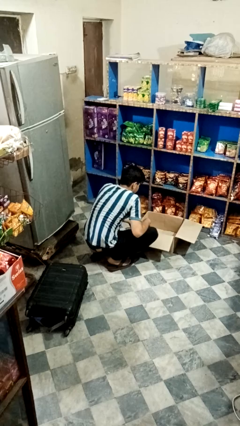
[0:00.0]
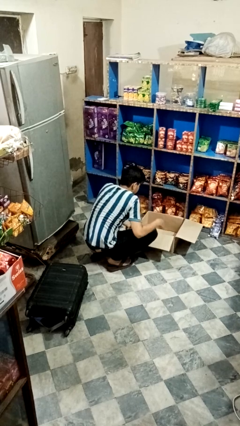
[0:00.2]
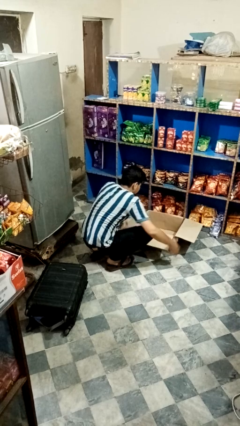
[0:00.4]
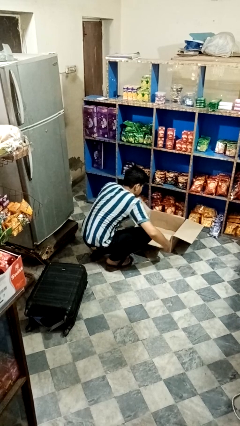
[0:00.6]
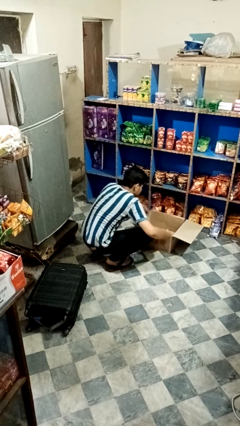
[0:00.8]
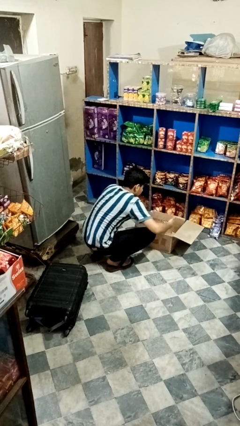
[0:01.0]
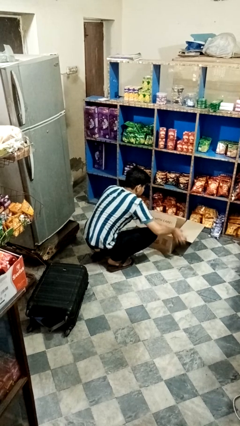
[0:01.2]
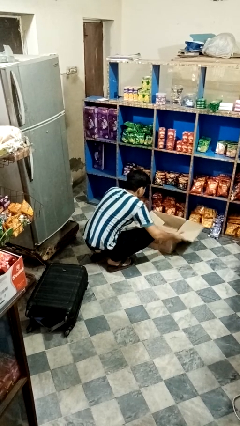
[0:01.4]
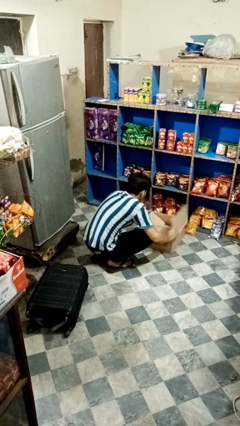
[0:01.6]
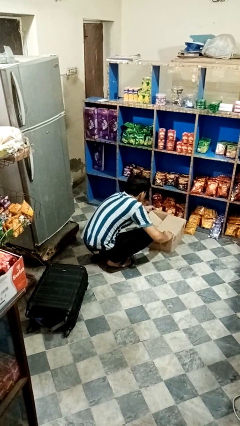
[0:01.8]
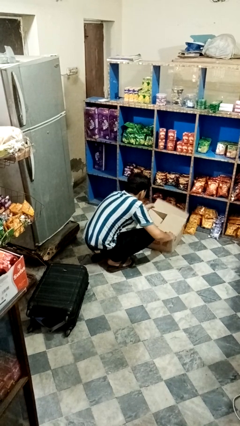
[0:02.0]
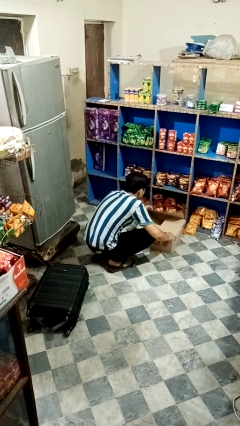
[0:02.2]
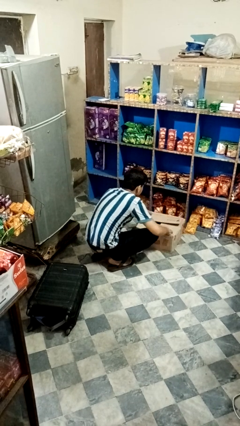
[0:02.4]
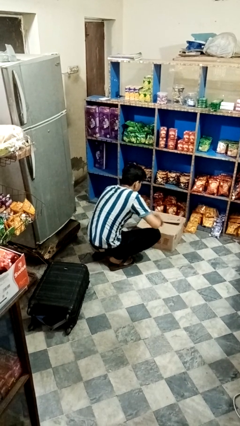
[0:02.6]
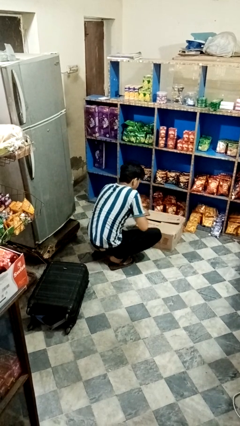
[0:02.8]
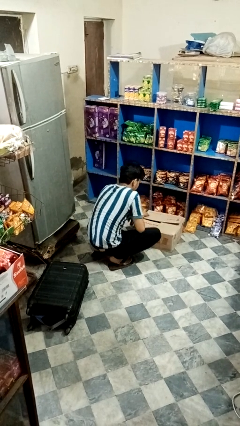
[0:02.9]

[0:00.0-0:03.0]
person closes box

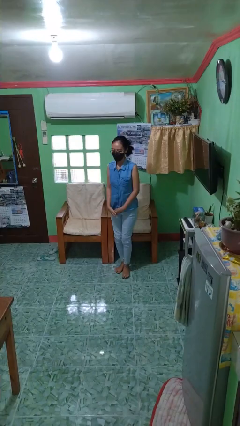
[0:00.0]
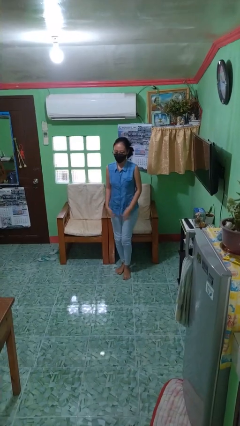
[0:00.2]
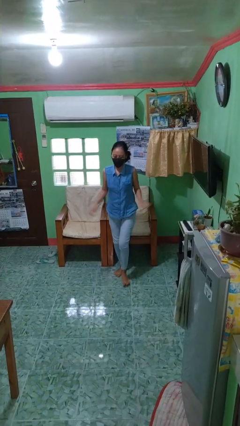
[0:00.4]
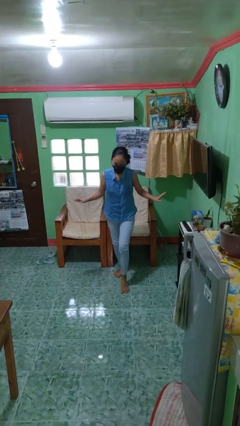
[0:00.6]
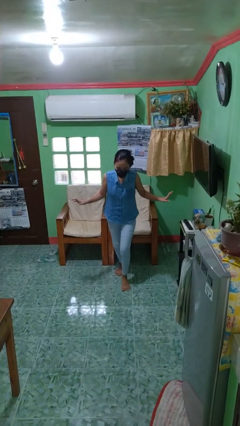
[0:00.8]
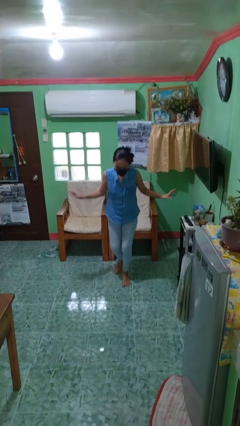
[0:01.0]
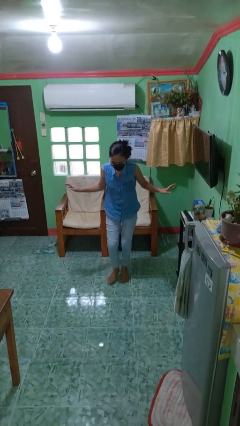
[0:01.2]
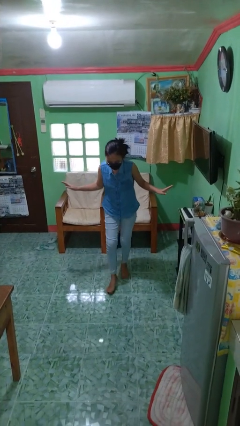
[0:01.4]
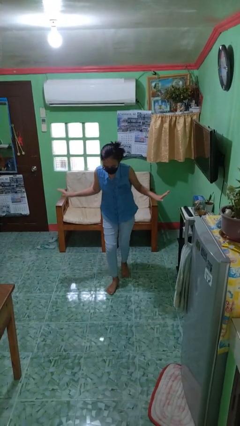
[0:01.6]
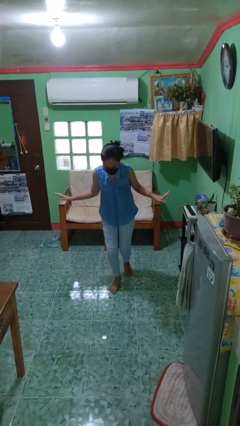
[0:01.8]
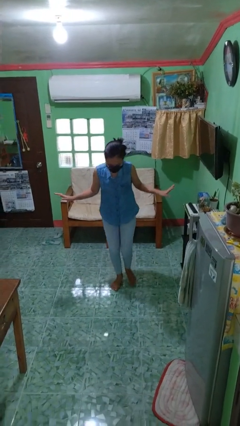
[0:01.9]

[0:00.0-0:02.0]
person walks tiptoe

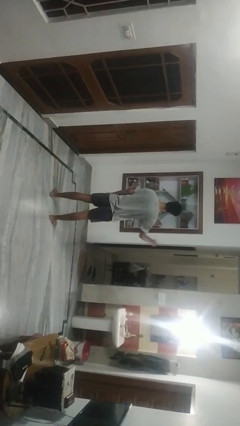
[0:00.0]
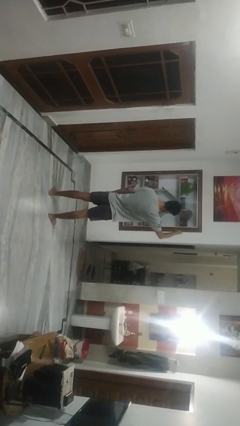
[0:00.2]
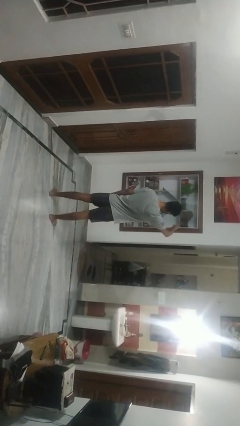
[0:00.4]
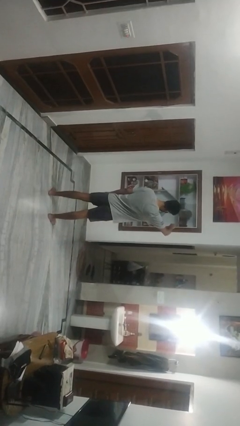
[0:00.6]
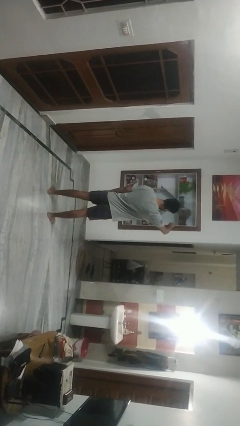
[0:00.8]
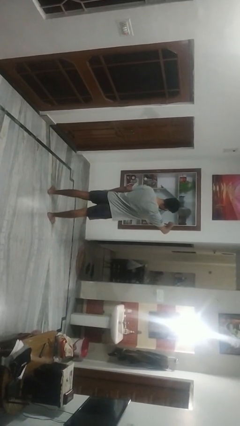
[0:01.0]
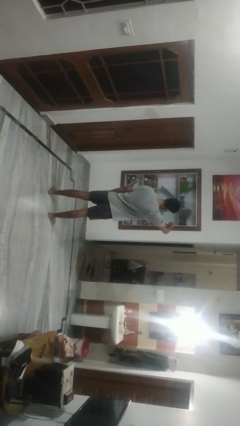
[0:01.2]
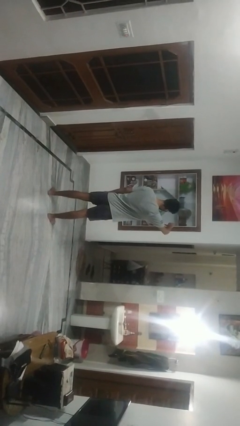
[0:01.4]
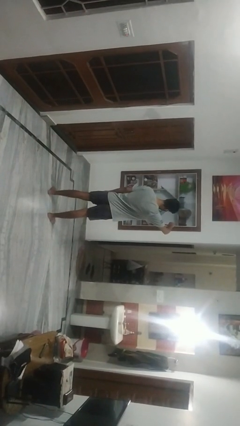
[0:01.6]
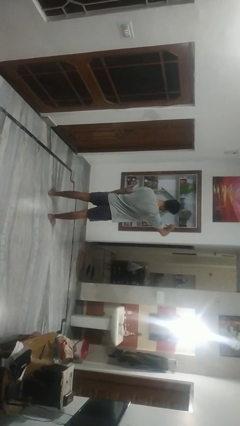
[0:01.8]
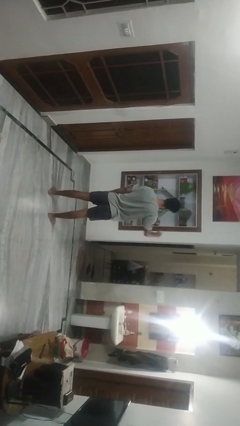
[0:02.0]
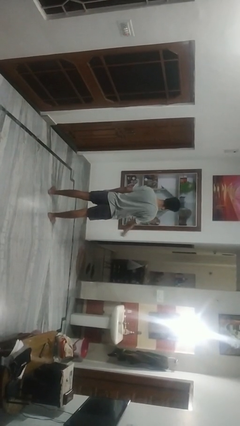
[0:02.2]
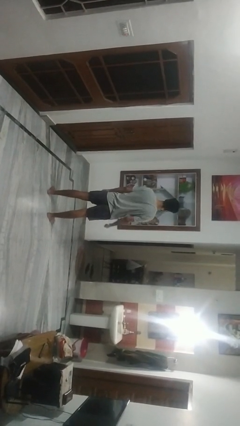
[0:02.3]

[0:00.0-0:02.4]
person gestures thumbs down

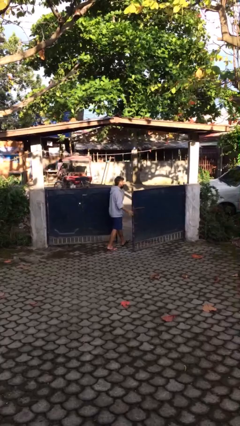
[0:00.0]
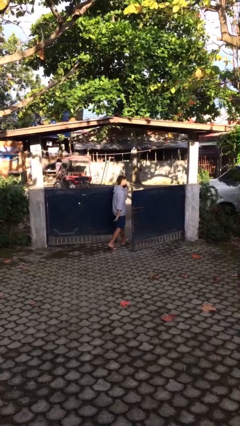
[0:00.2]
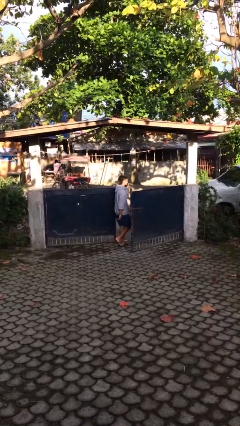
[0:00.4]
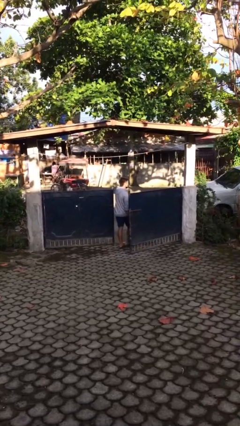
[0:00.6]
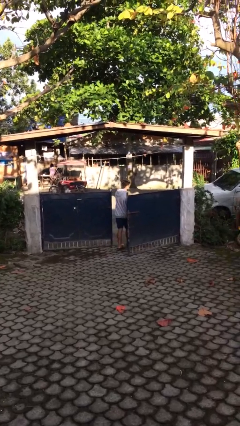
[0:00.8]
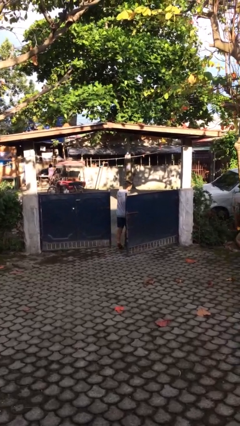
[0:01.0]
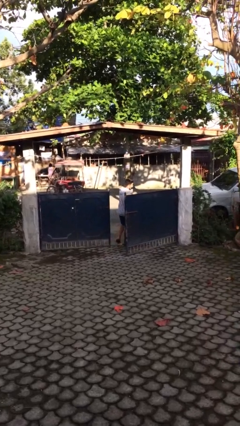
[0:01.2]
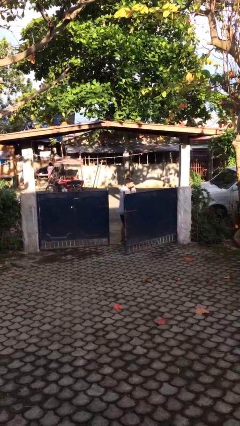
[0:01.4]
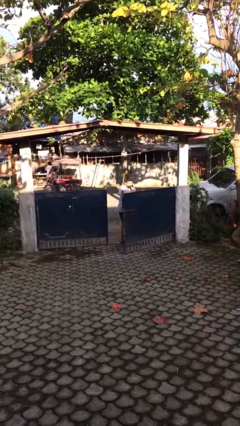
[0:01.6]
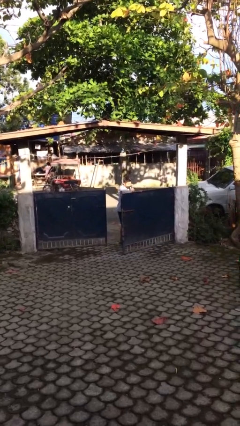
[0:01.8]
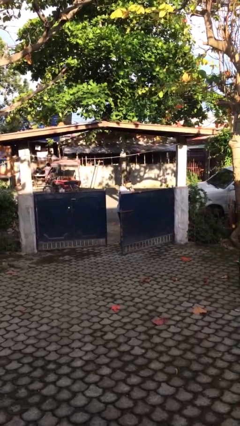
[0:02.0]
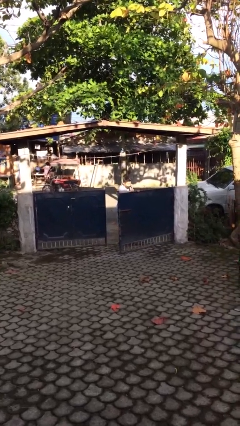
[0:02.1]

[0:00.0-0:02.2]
person exits scene through structure

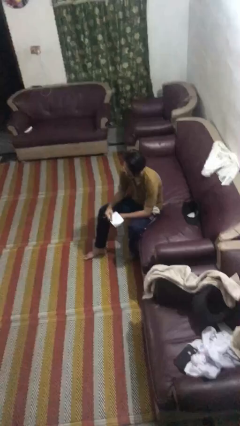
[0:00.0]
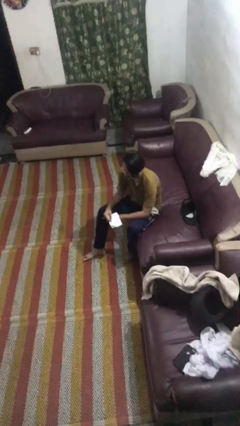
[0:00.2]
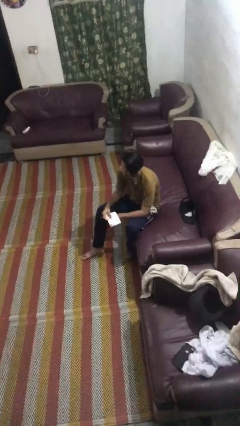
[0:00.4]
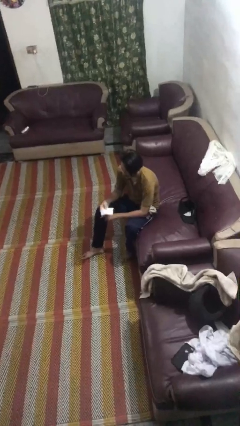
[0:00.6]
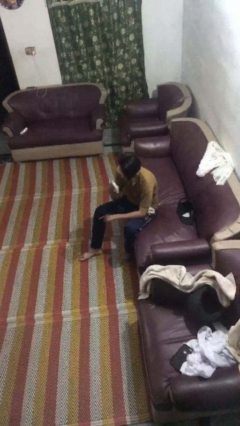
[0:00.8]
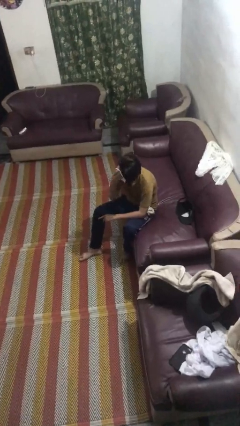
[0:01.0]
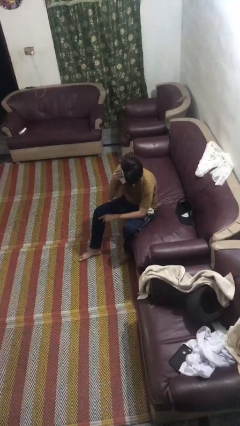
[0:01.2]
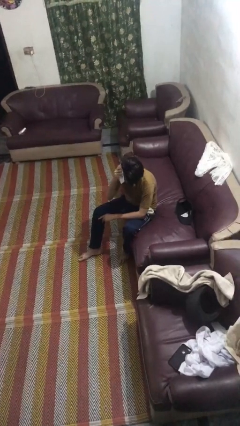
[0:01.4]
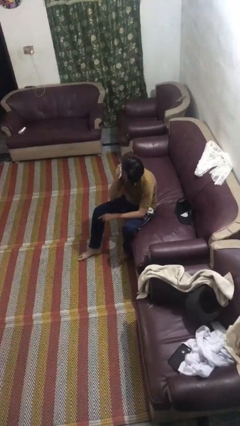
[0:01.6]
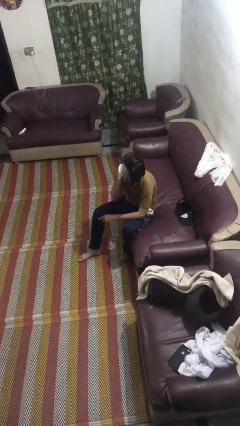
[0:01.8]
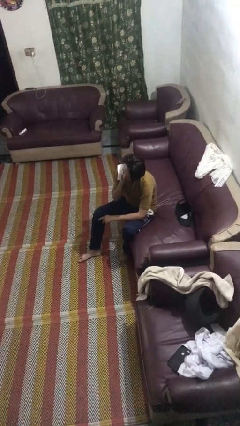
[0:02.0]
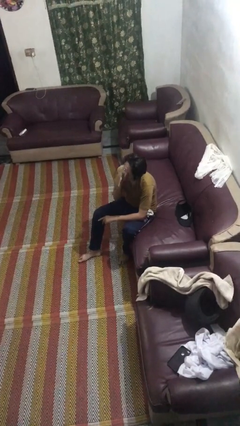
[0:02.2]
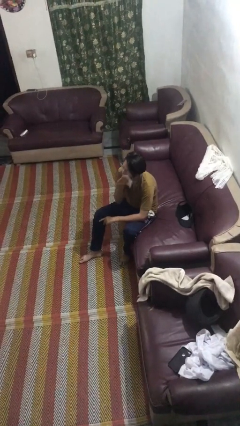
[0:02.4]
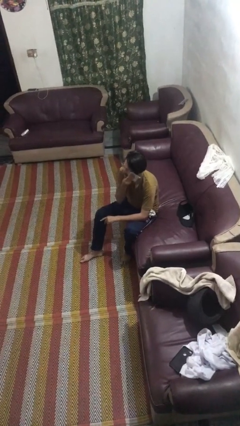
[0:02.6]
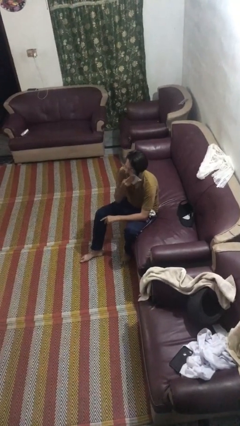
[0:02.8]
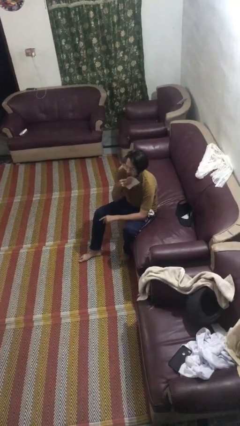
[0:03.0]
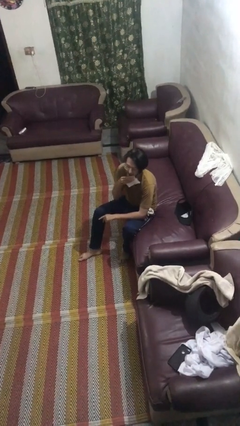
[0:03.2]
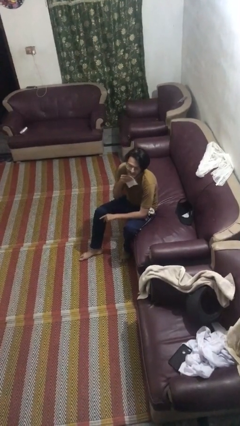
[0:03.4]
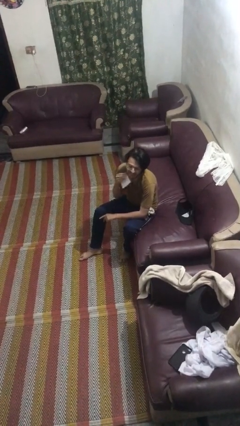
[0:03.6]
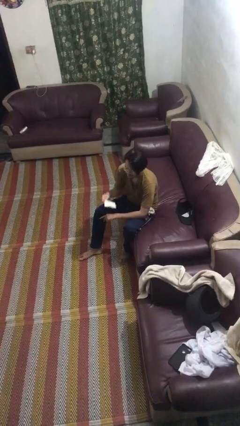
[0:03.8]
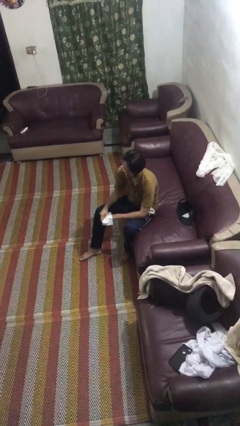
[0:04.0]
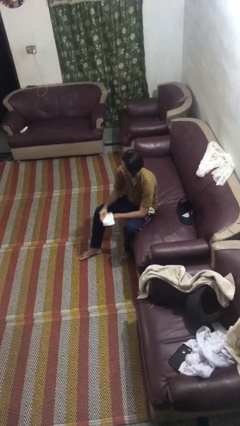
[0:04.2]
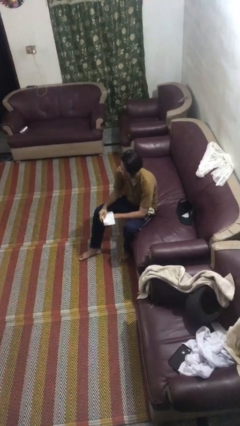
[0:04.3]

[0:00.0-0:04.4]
person wipes mouth with napkin

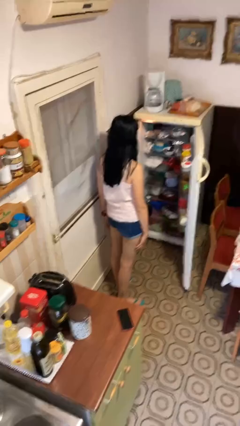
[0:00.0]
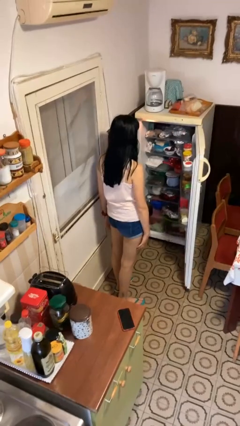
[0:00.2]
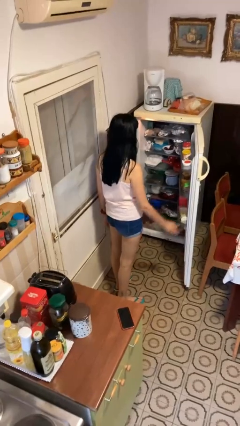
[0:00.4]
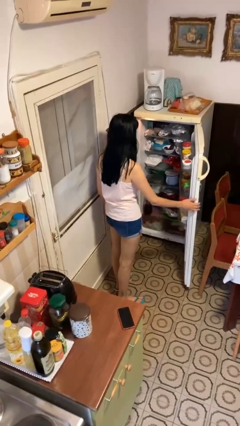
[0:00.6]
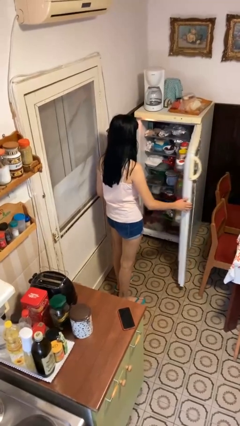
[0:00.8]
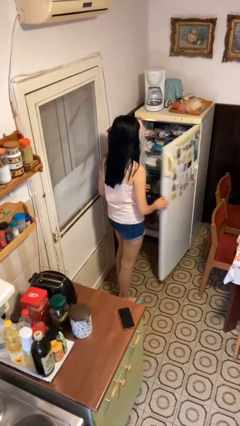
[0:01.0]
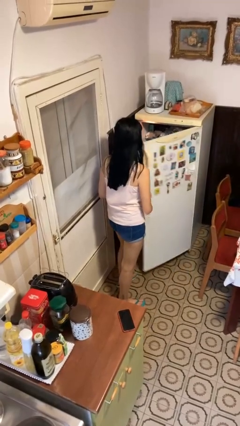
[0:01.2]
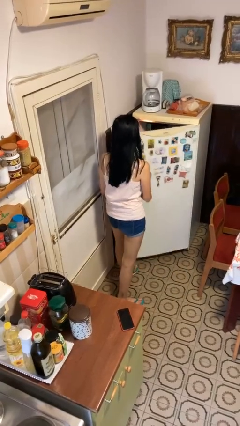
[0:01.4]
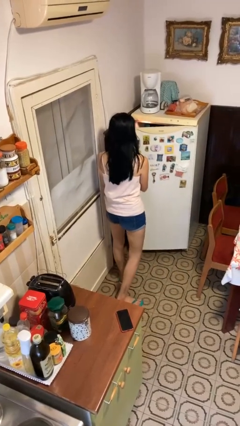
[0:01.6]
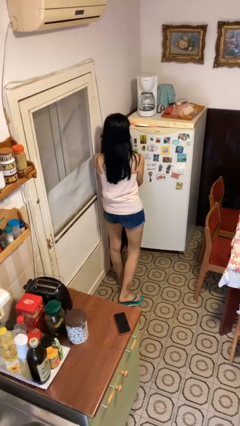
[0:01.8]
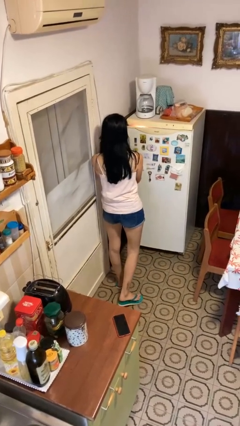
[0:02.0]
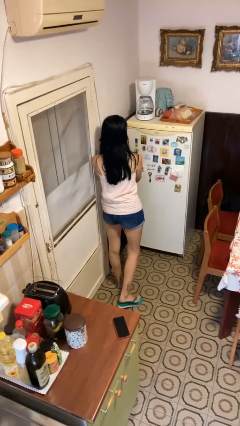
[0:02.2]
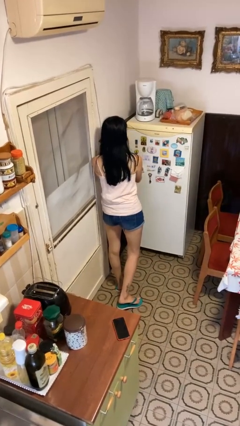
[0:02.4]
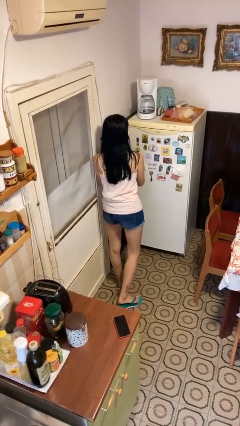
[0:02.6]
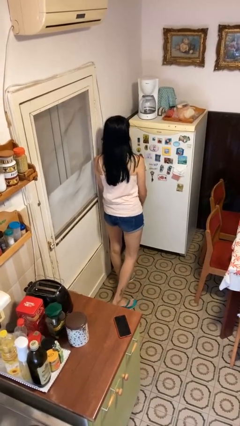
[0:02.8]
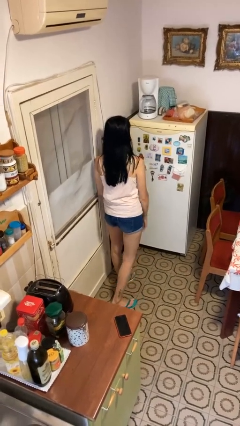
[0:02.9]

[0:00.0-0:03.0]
person closes refrigerator

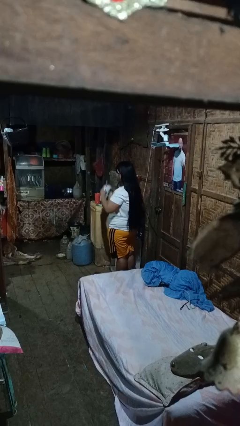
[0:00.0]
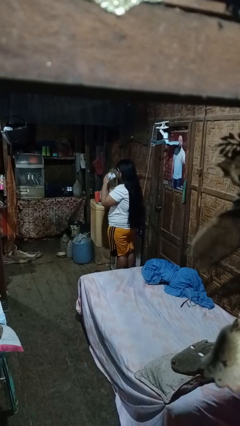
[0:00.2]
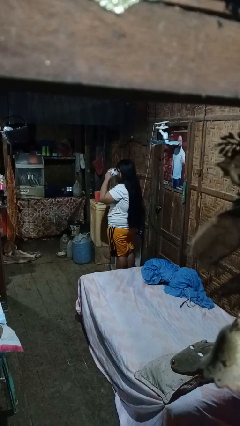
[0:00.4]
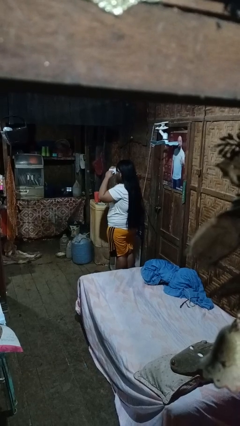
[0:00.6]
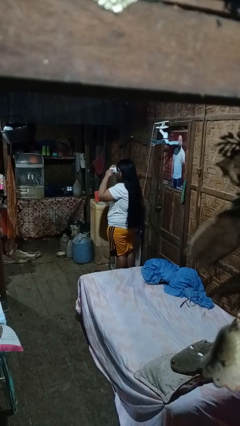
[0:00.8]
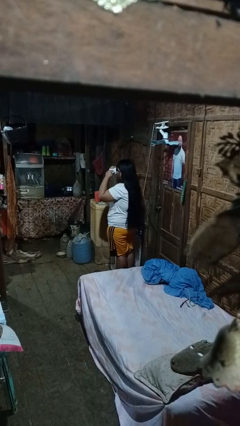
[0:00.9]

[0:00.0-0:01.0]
person drinks from mug
